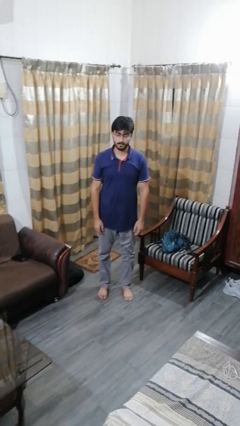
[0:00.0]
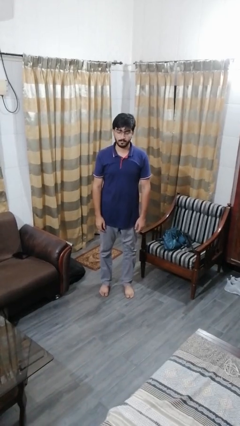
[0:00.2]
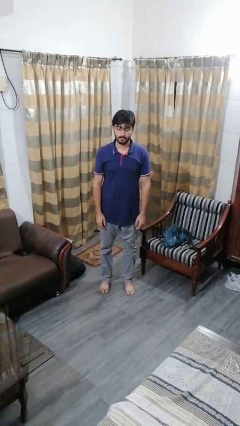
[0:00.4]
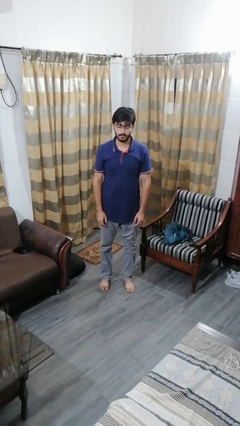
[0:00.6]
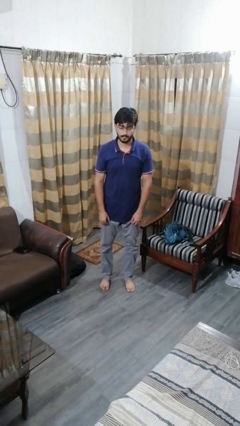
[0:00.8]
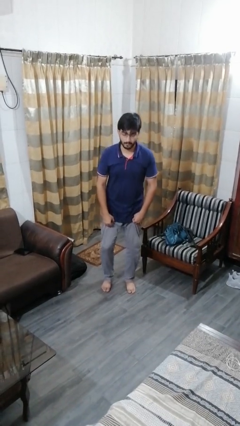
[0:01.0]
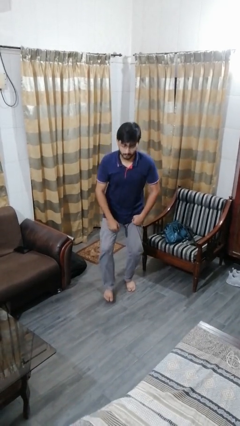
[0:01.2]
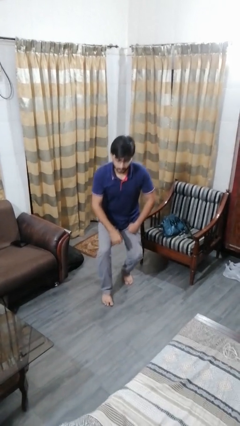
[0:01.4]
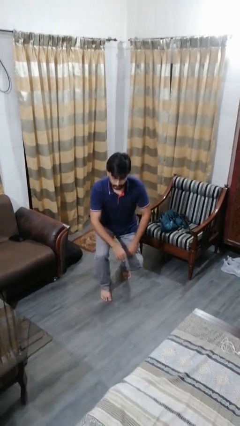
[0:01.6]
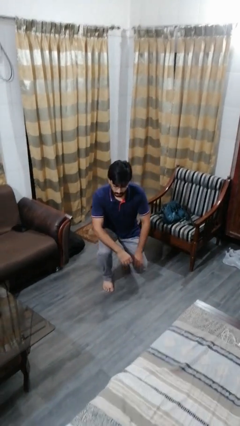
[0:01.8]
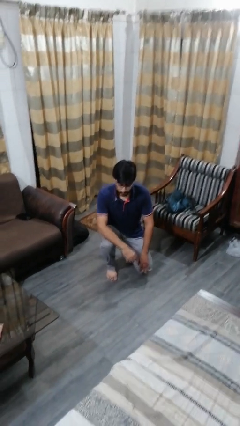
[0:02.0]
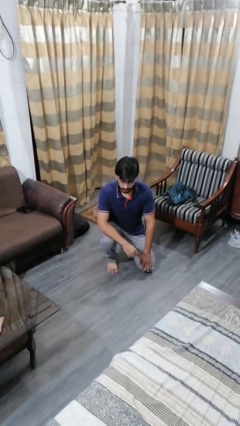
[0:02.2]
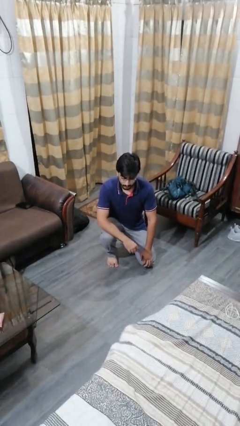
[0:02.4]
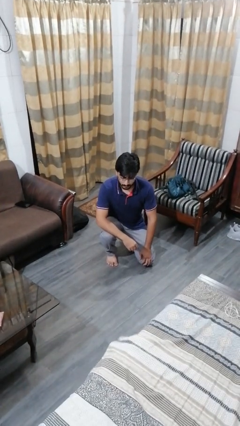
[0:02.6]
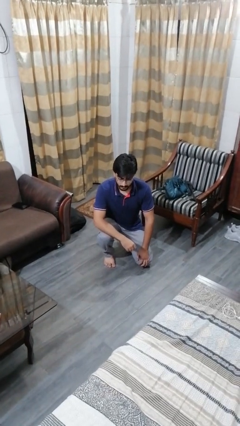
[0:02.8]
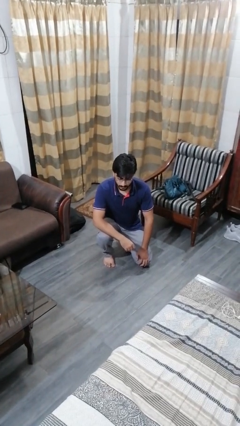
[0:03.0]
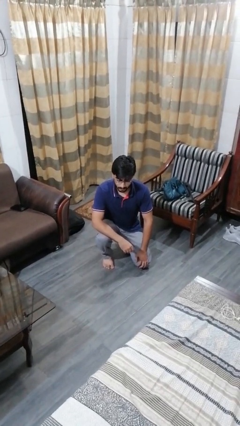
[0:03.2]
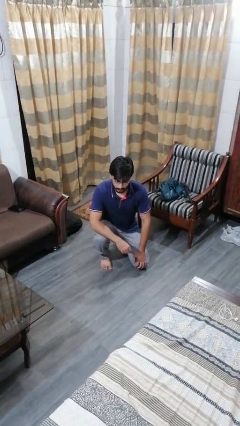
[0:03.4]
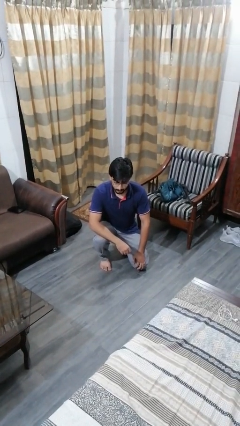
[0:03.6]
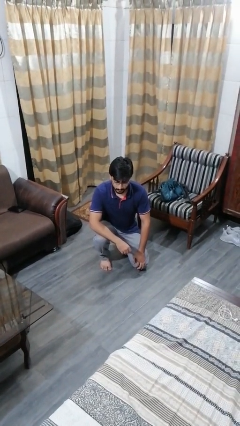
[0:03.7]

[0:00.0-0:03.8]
person kneels

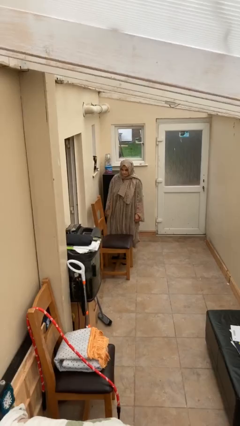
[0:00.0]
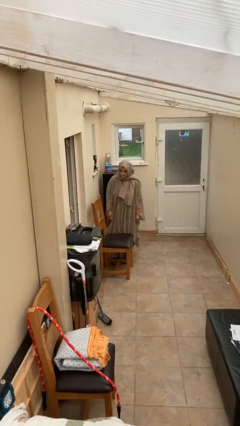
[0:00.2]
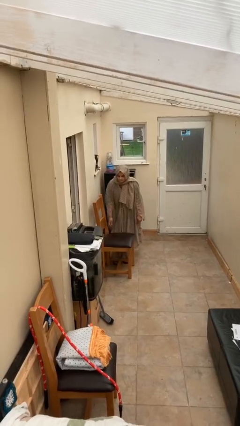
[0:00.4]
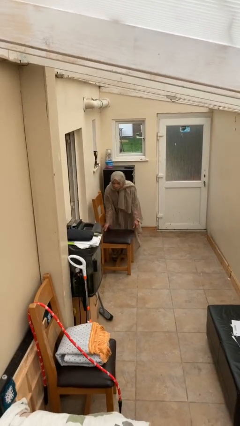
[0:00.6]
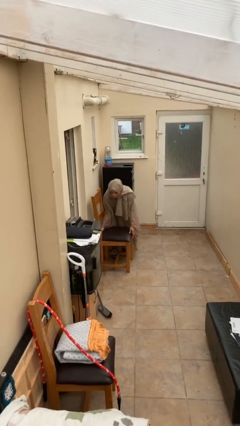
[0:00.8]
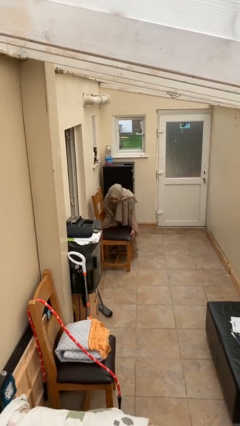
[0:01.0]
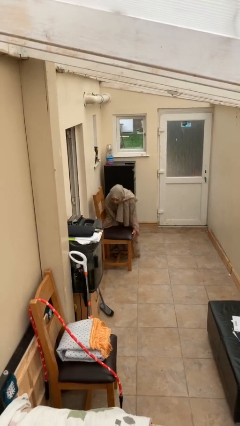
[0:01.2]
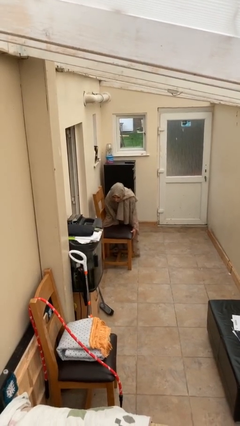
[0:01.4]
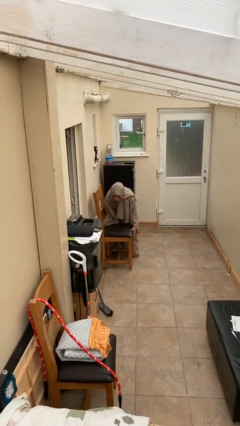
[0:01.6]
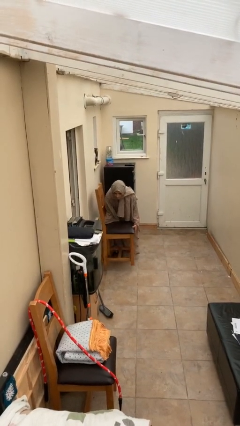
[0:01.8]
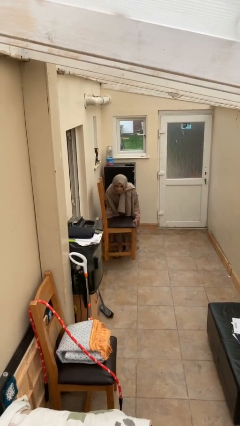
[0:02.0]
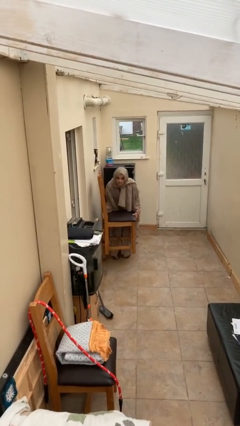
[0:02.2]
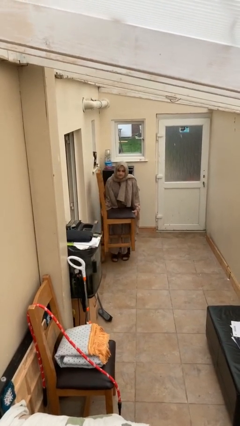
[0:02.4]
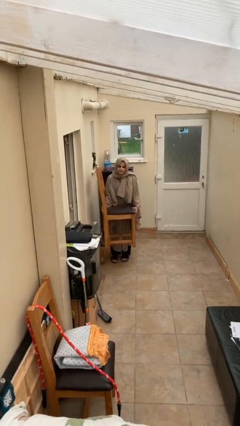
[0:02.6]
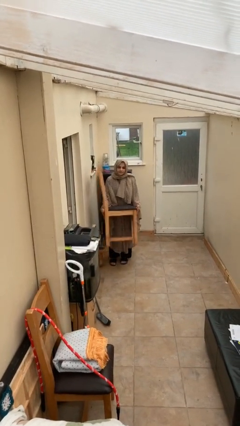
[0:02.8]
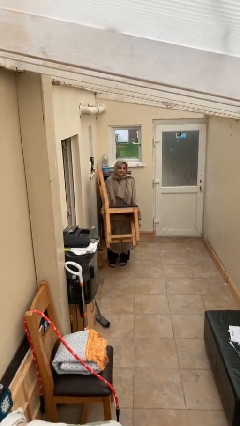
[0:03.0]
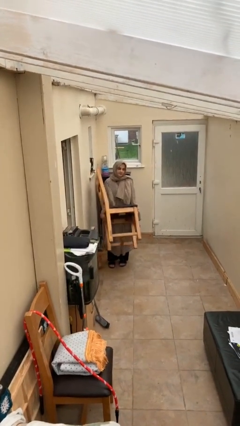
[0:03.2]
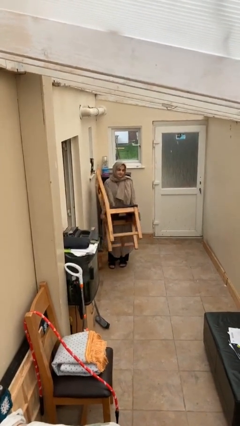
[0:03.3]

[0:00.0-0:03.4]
person picks up object from floor

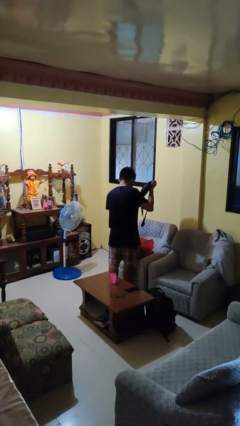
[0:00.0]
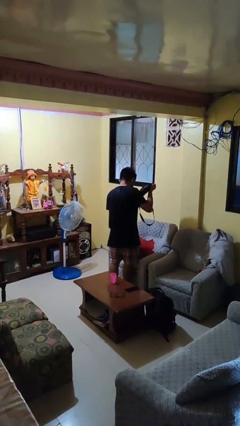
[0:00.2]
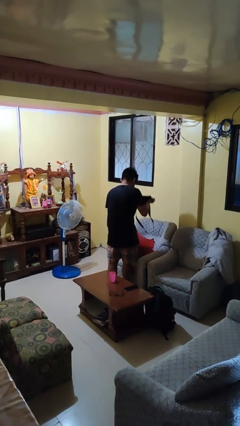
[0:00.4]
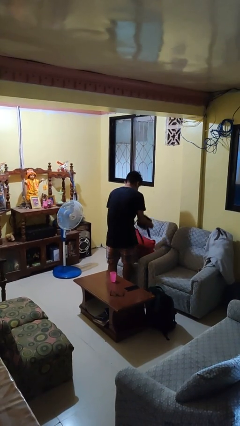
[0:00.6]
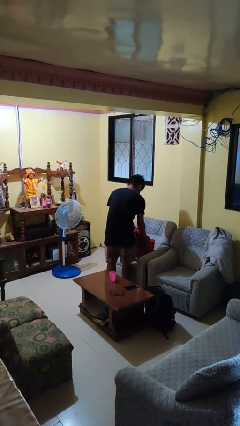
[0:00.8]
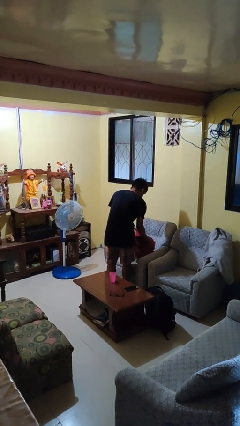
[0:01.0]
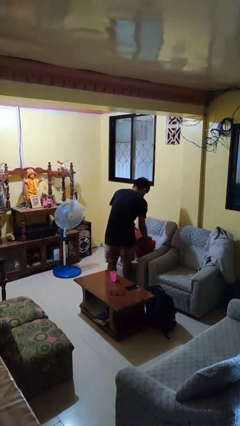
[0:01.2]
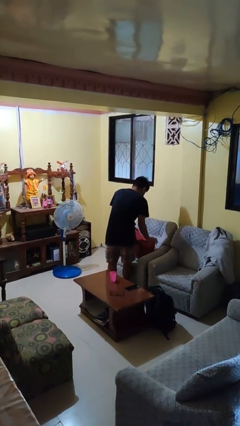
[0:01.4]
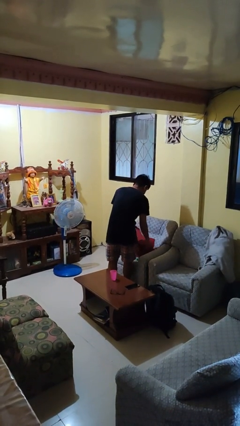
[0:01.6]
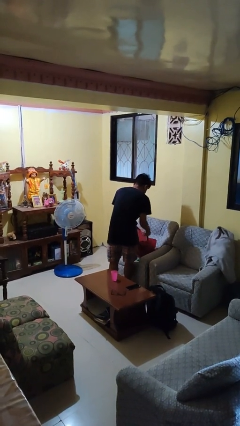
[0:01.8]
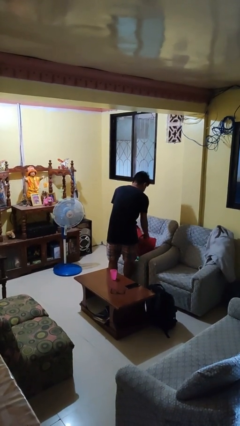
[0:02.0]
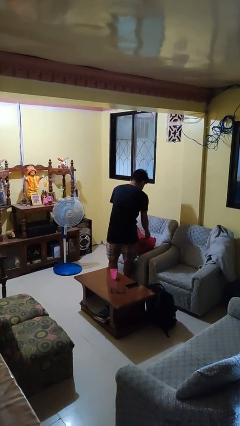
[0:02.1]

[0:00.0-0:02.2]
person puts object into bag

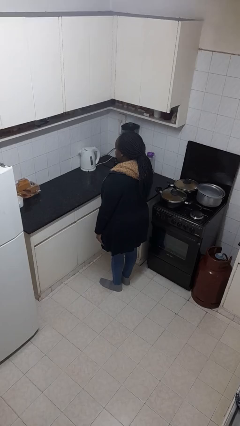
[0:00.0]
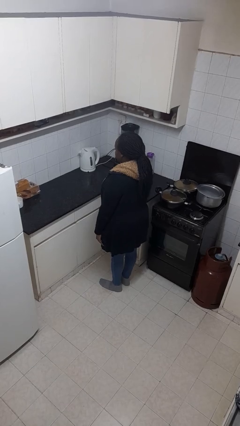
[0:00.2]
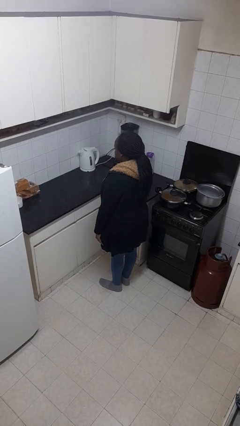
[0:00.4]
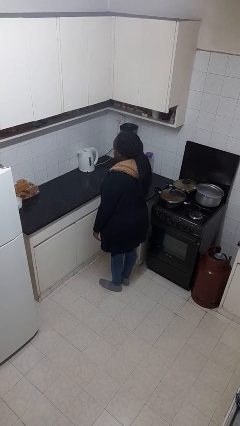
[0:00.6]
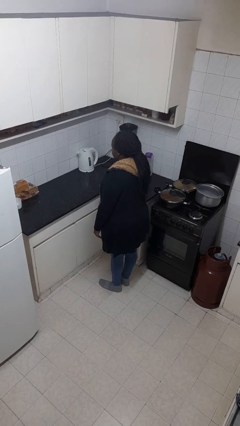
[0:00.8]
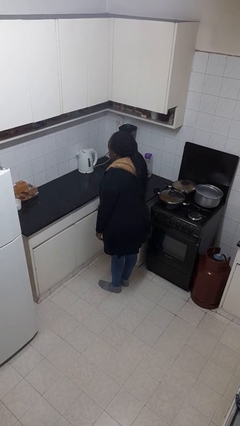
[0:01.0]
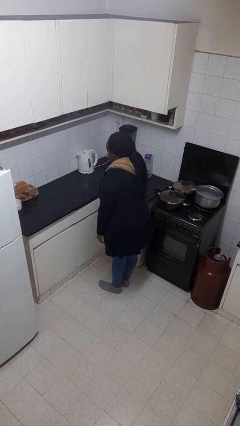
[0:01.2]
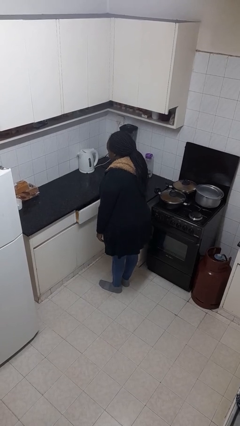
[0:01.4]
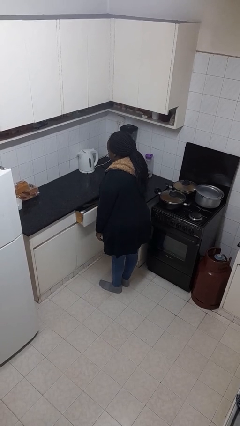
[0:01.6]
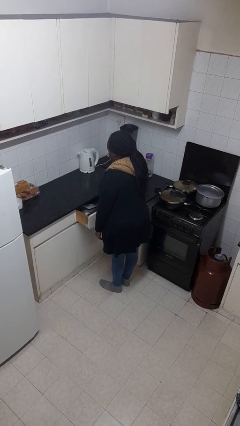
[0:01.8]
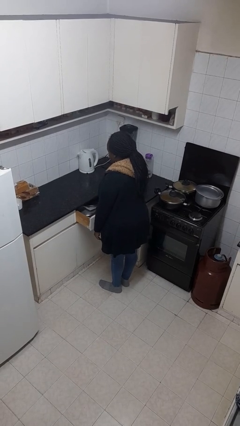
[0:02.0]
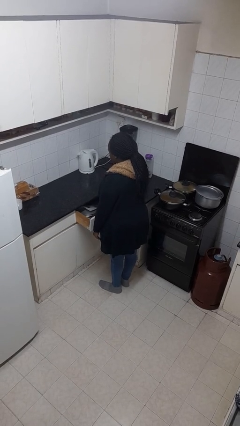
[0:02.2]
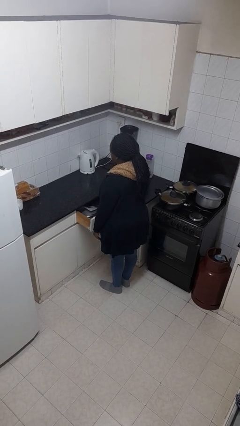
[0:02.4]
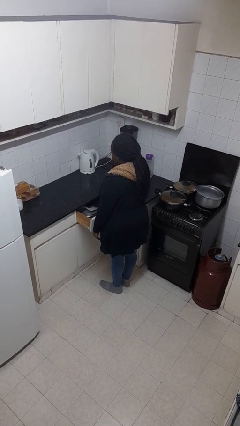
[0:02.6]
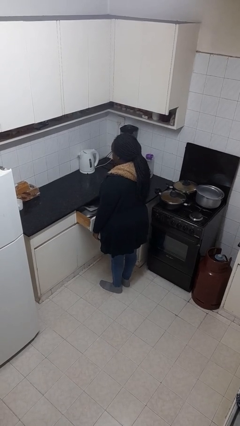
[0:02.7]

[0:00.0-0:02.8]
person opens kitchen drawer

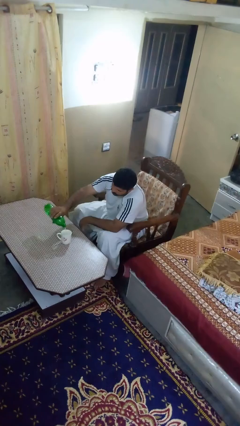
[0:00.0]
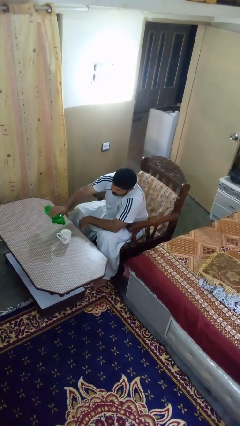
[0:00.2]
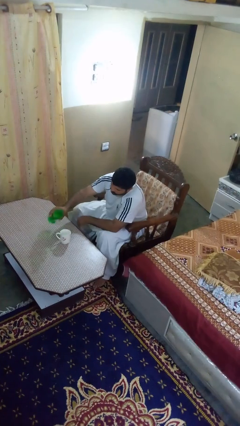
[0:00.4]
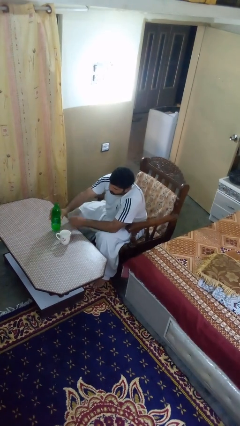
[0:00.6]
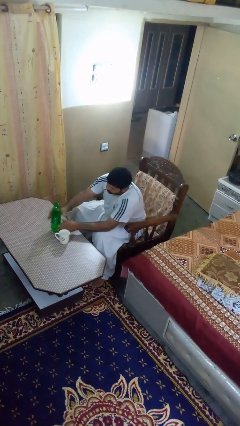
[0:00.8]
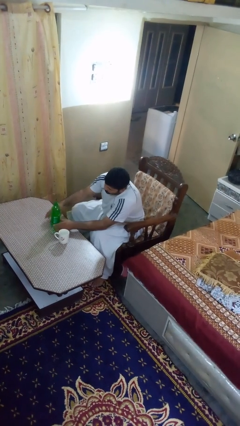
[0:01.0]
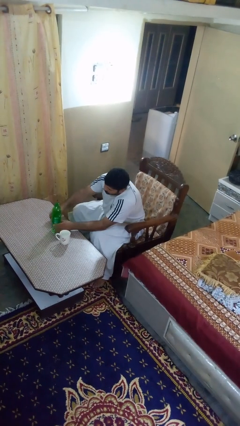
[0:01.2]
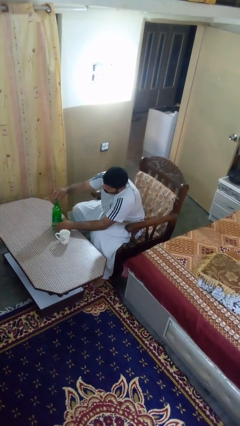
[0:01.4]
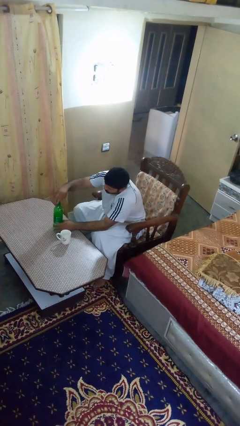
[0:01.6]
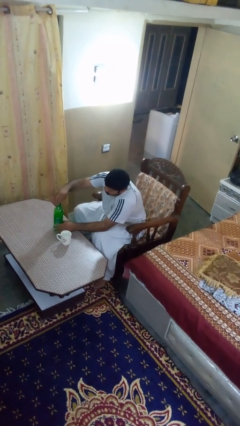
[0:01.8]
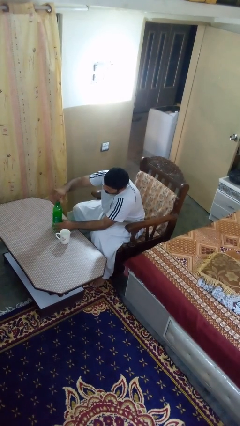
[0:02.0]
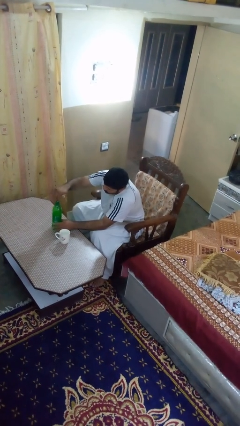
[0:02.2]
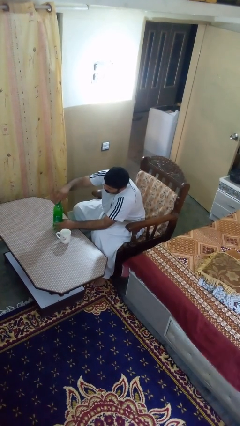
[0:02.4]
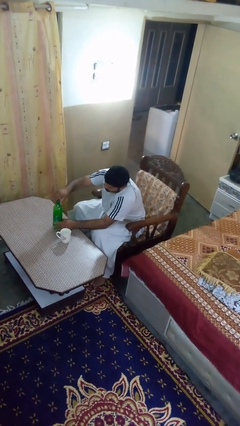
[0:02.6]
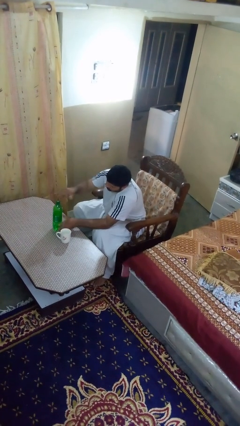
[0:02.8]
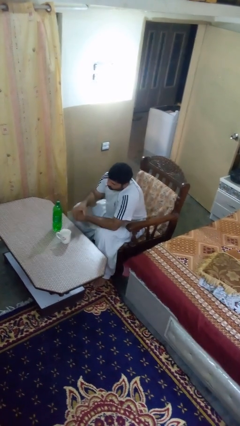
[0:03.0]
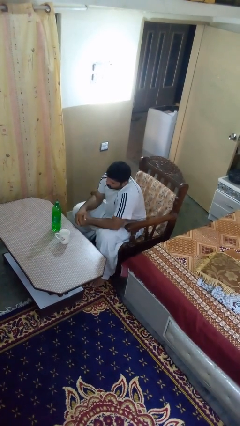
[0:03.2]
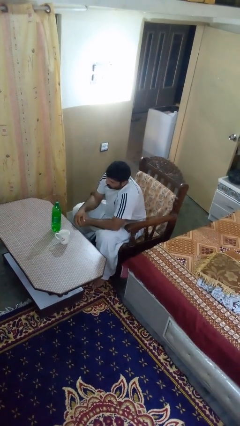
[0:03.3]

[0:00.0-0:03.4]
person screws lid to bottle

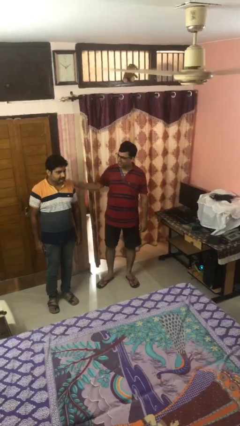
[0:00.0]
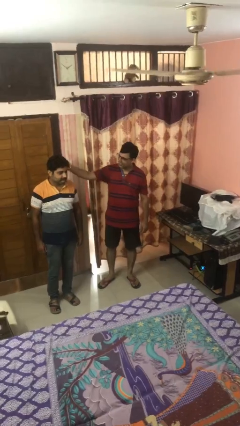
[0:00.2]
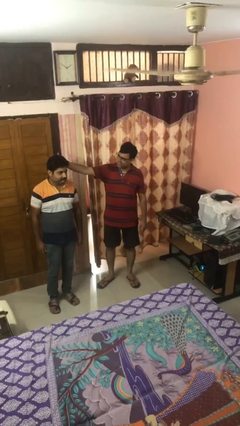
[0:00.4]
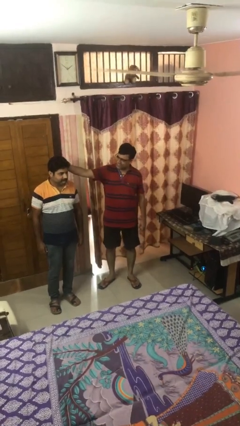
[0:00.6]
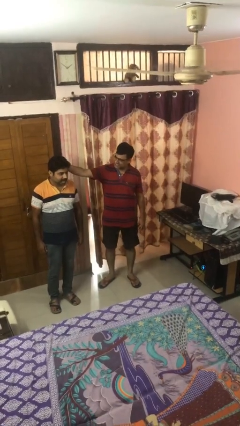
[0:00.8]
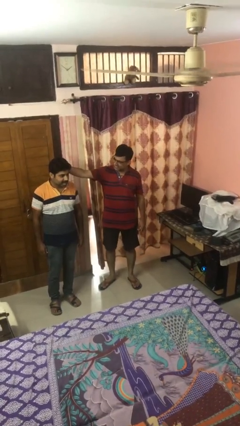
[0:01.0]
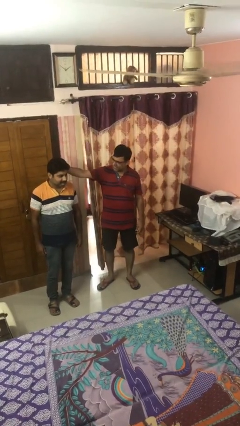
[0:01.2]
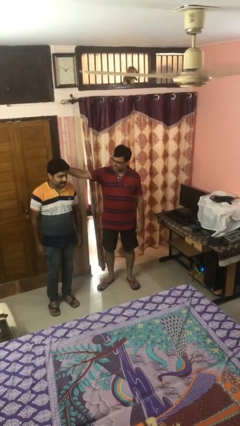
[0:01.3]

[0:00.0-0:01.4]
person grabs person by hair

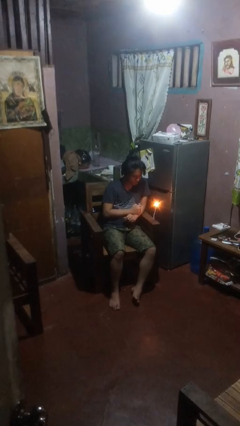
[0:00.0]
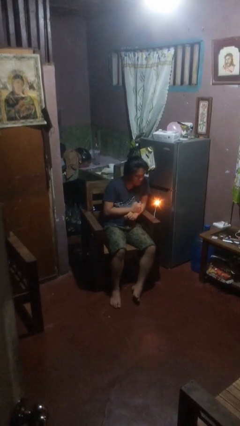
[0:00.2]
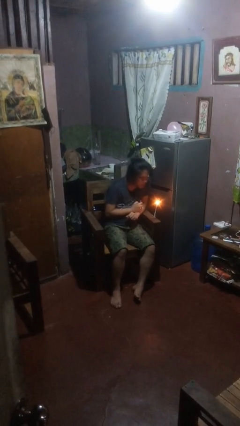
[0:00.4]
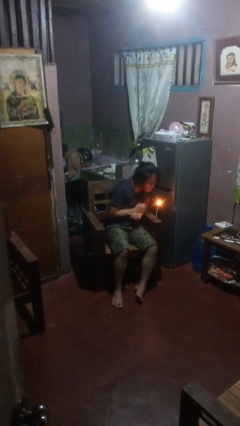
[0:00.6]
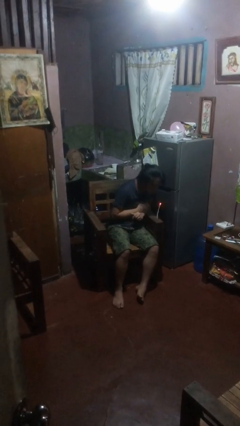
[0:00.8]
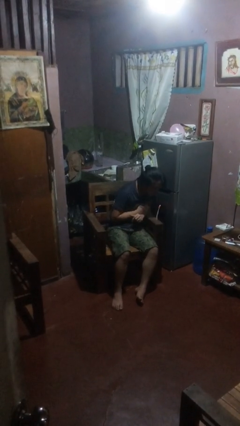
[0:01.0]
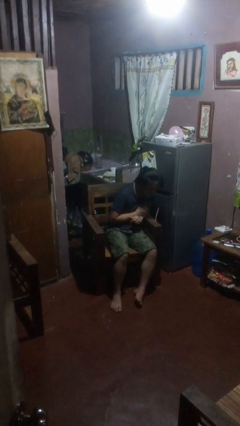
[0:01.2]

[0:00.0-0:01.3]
person extinguishes candle
